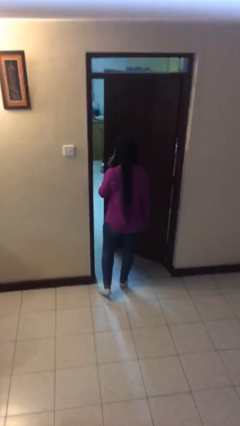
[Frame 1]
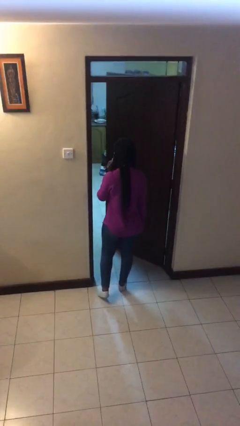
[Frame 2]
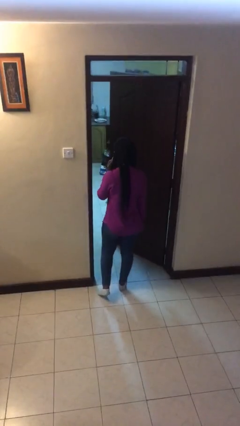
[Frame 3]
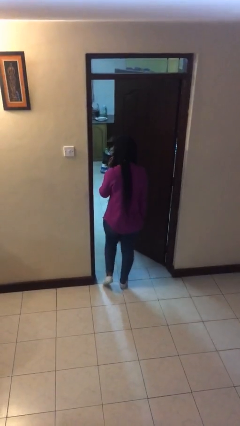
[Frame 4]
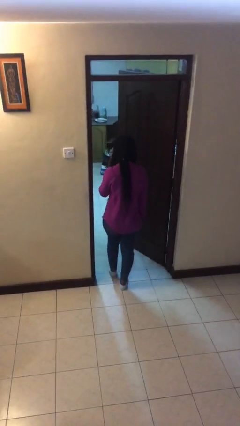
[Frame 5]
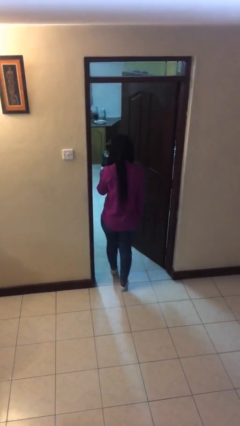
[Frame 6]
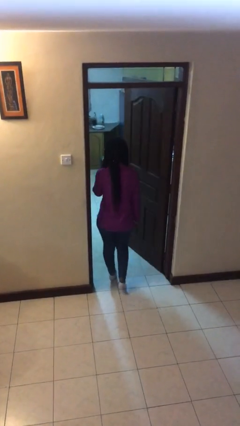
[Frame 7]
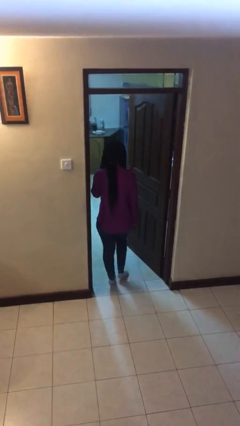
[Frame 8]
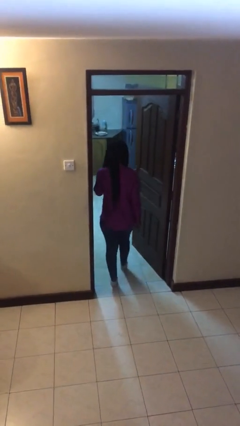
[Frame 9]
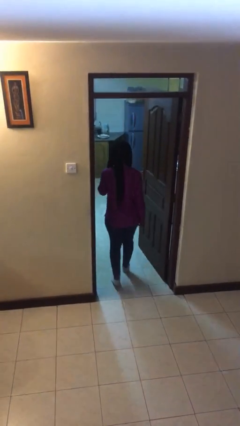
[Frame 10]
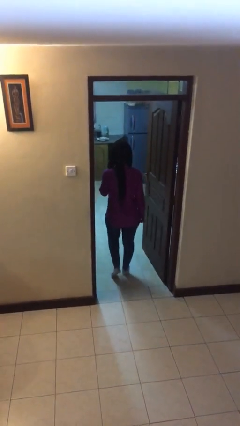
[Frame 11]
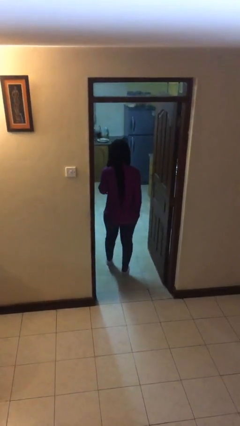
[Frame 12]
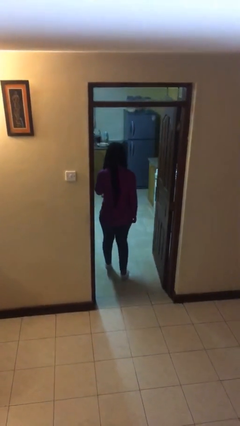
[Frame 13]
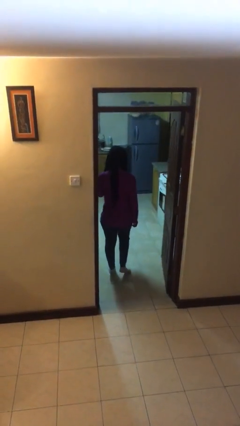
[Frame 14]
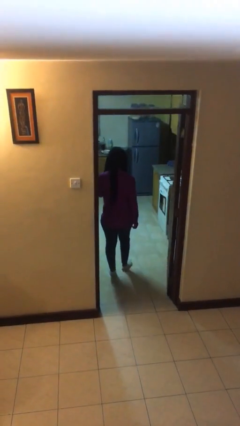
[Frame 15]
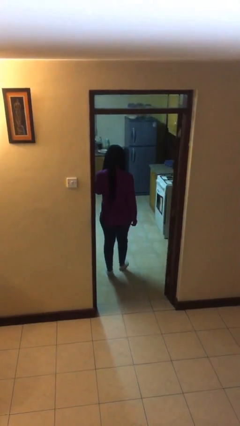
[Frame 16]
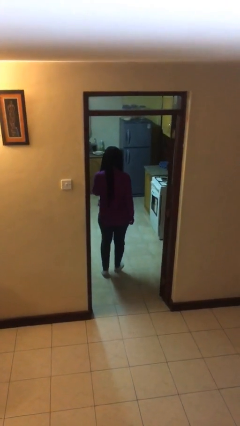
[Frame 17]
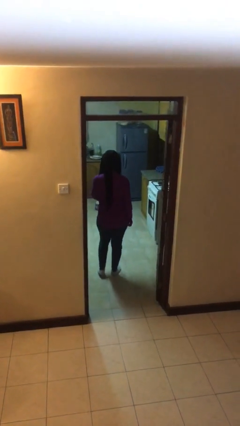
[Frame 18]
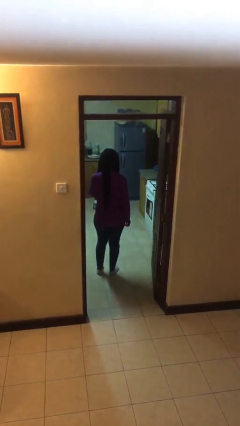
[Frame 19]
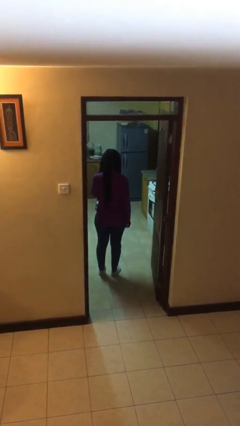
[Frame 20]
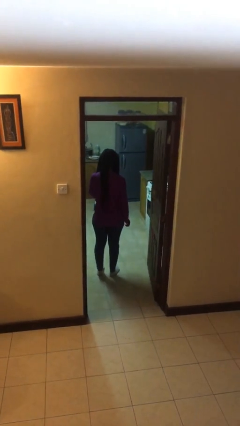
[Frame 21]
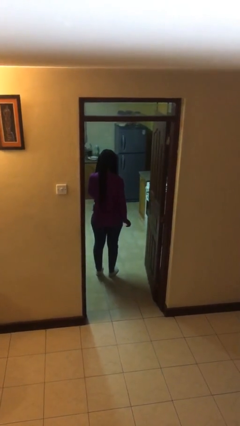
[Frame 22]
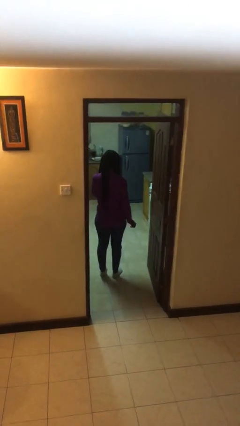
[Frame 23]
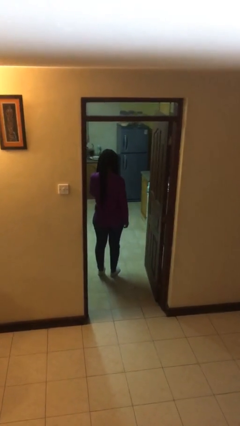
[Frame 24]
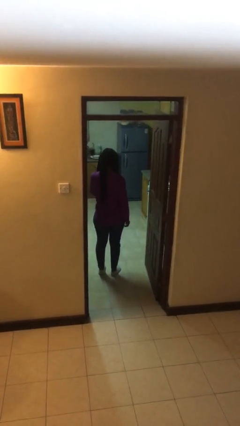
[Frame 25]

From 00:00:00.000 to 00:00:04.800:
person exits scene through structure

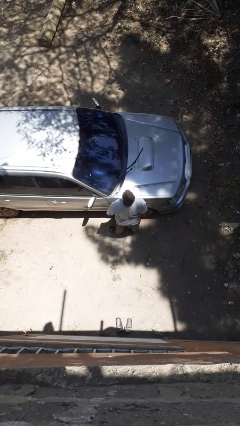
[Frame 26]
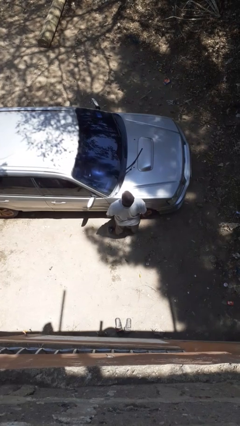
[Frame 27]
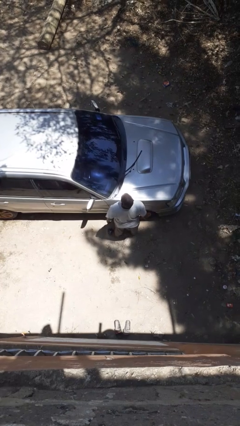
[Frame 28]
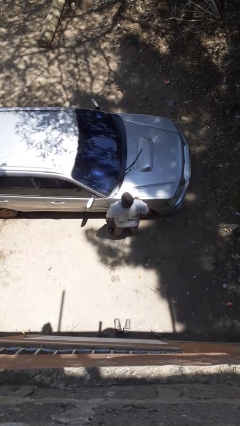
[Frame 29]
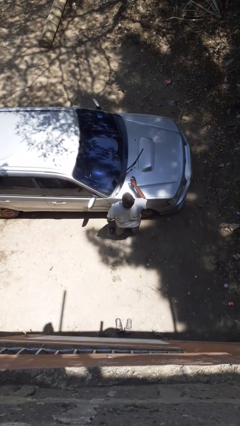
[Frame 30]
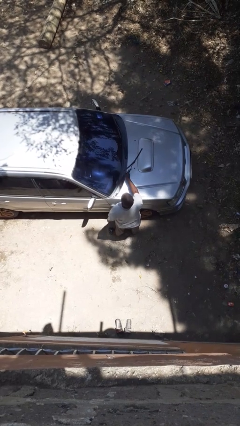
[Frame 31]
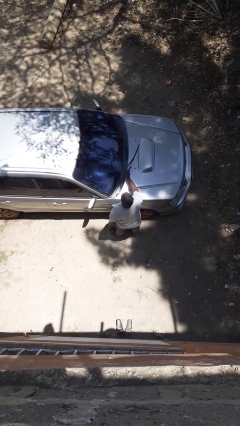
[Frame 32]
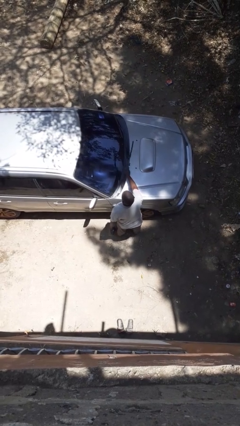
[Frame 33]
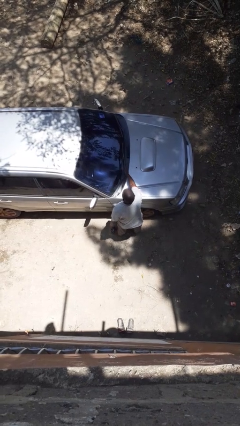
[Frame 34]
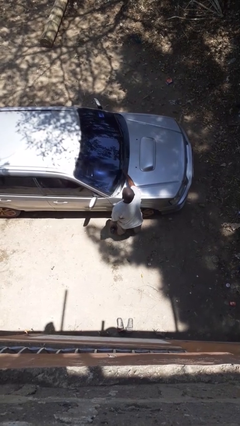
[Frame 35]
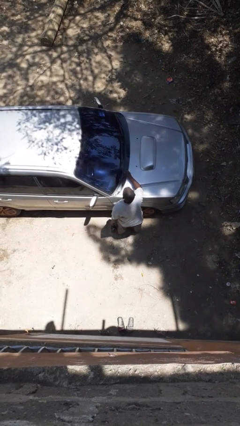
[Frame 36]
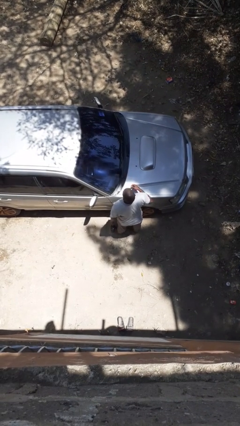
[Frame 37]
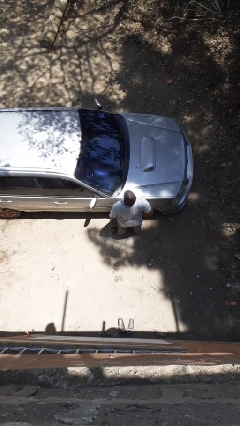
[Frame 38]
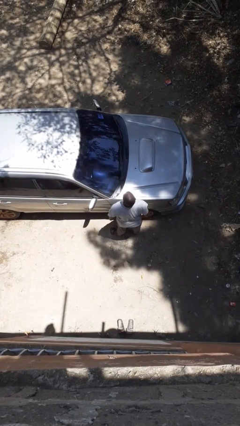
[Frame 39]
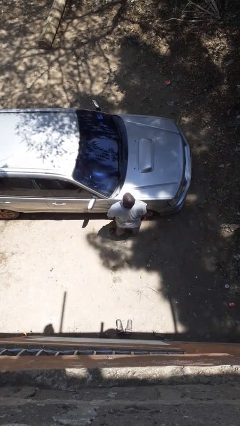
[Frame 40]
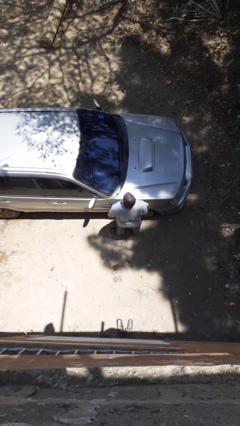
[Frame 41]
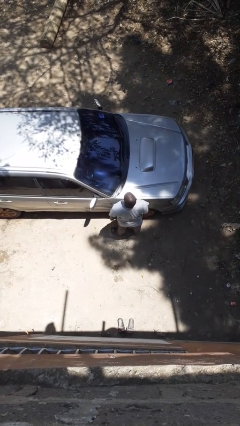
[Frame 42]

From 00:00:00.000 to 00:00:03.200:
person flips down car wipers

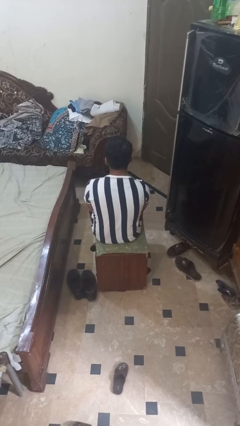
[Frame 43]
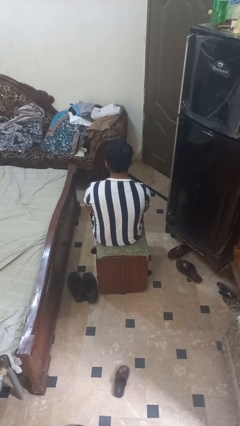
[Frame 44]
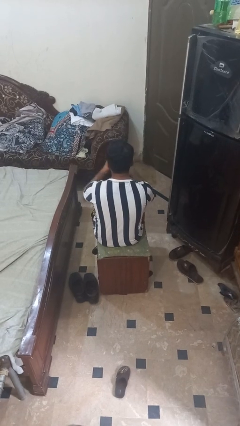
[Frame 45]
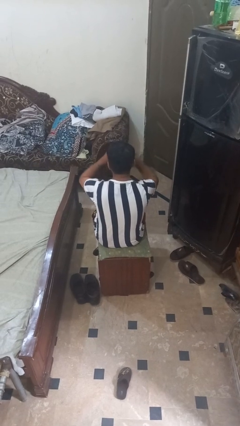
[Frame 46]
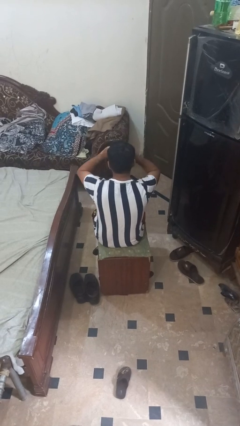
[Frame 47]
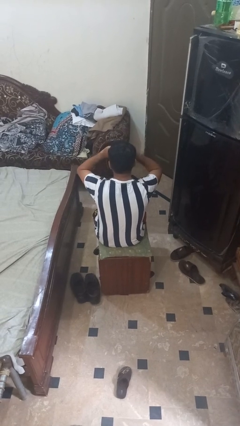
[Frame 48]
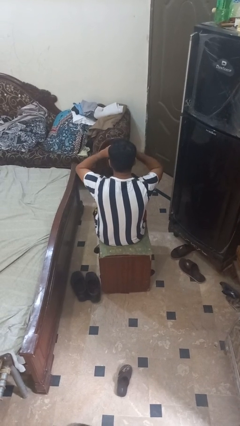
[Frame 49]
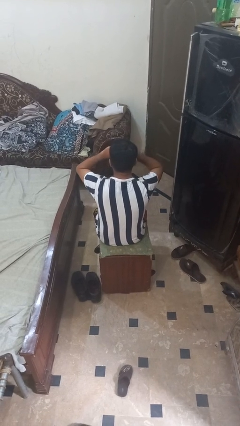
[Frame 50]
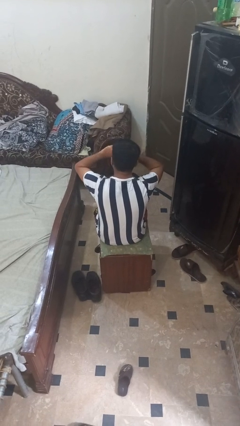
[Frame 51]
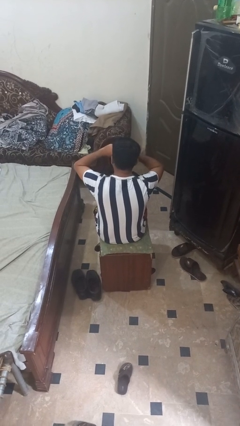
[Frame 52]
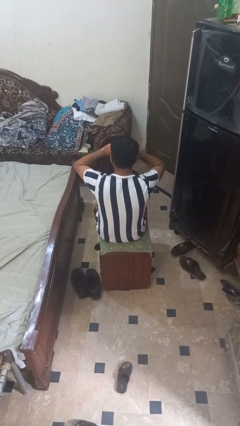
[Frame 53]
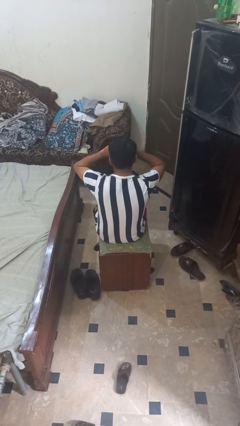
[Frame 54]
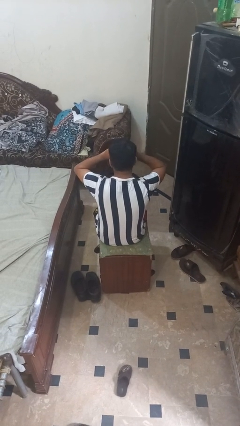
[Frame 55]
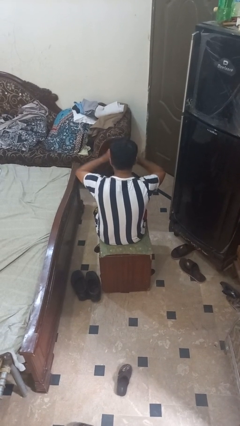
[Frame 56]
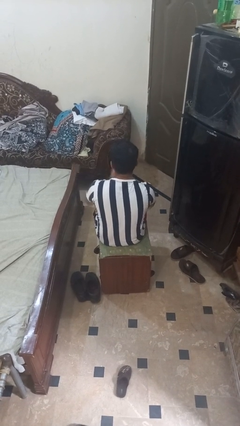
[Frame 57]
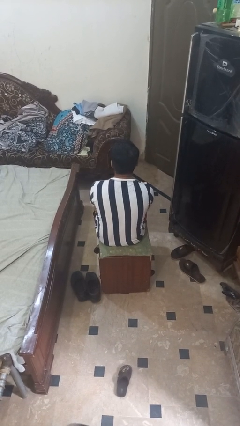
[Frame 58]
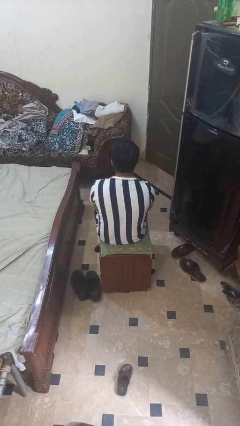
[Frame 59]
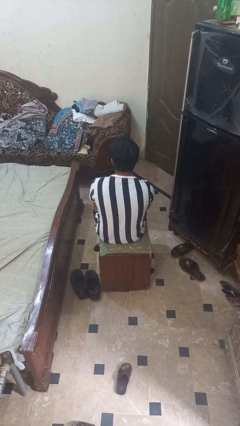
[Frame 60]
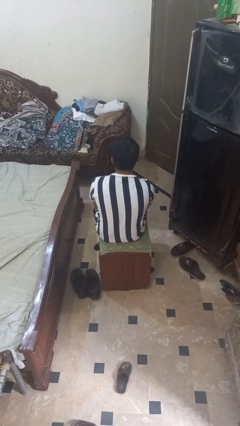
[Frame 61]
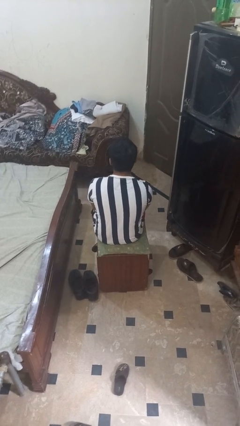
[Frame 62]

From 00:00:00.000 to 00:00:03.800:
person rubs eyes

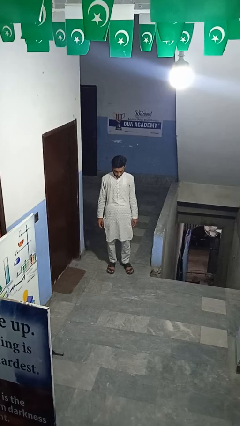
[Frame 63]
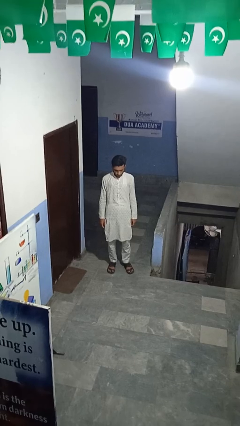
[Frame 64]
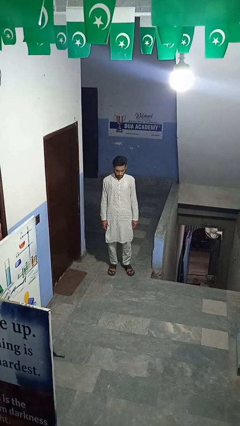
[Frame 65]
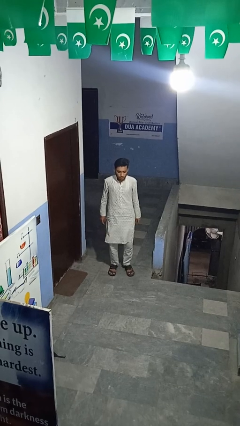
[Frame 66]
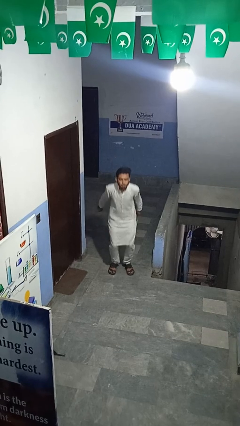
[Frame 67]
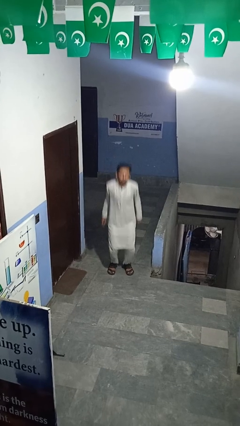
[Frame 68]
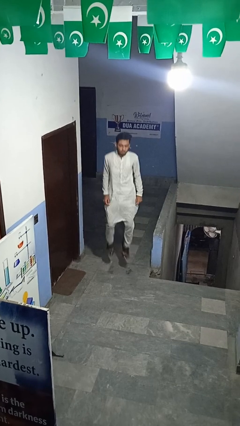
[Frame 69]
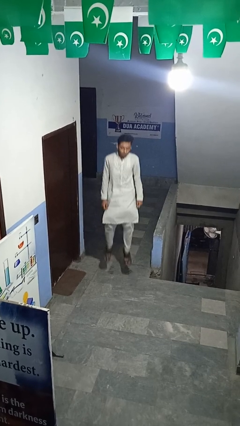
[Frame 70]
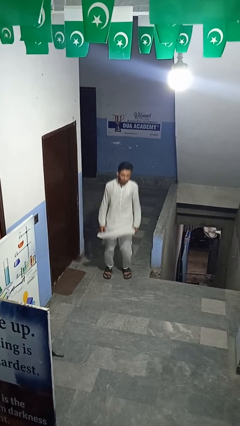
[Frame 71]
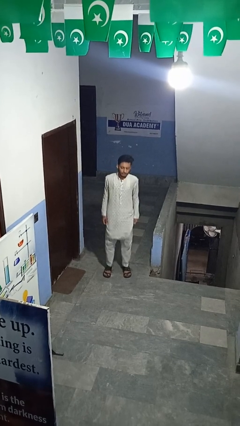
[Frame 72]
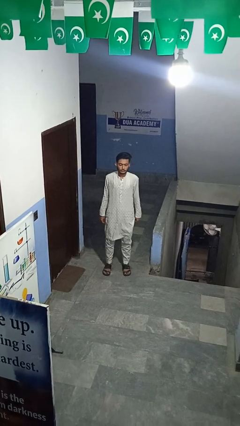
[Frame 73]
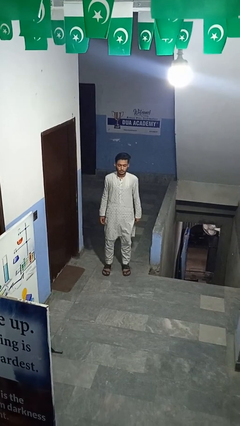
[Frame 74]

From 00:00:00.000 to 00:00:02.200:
person jumps

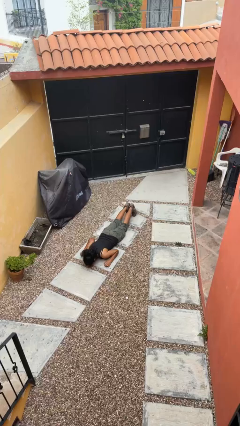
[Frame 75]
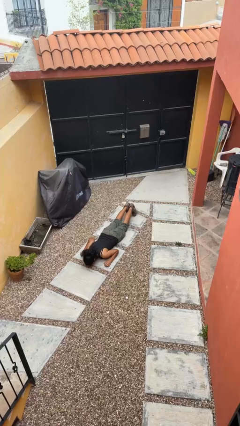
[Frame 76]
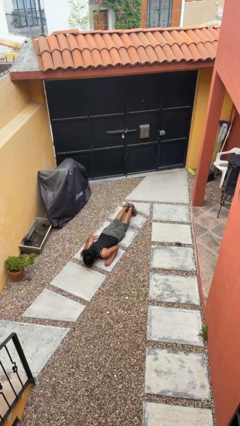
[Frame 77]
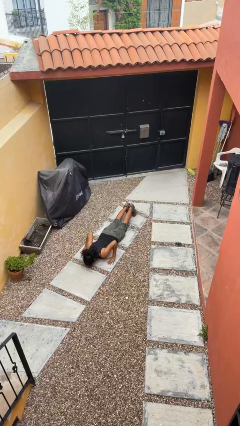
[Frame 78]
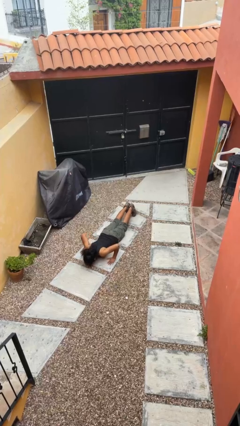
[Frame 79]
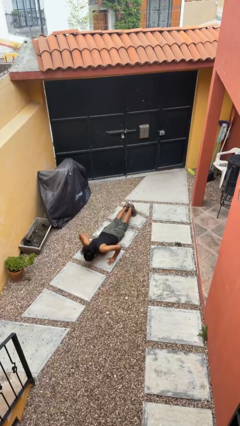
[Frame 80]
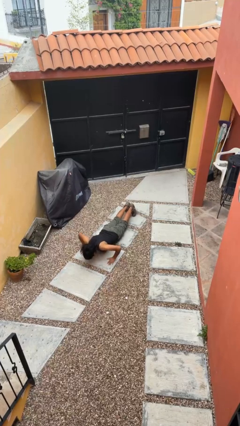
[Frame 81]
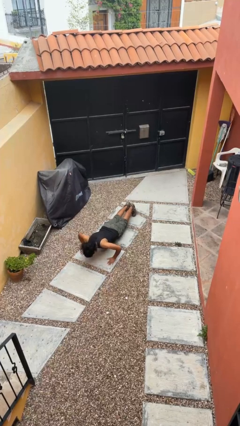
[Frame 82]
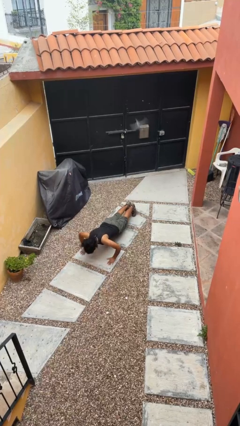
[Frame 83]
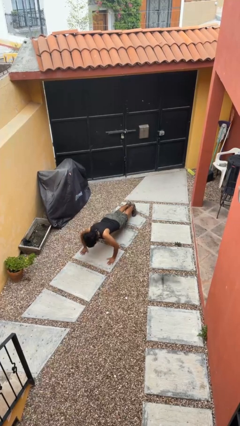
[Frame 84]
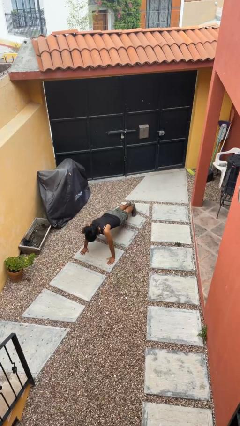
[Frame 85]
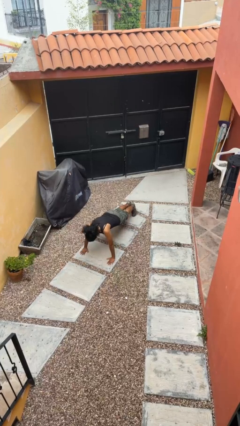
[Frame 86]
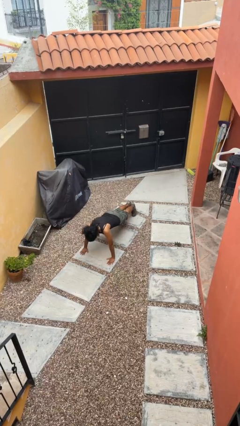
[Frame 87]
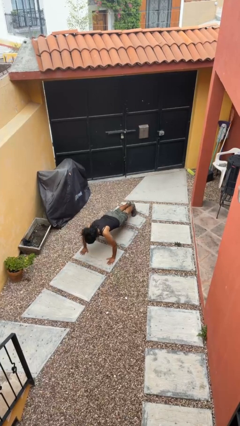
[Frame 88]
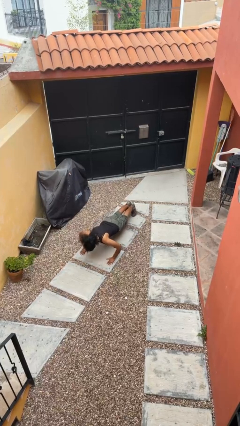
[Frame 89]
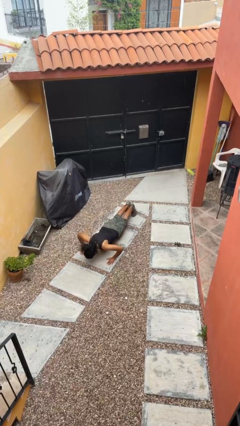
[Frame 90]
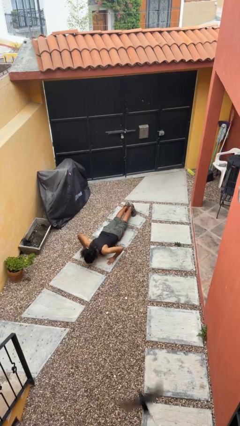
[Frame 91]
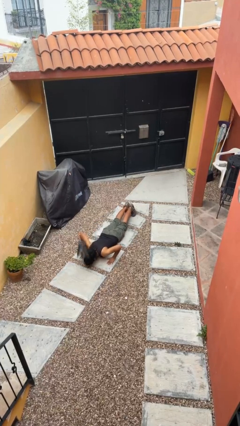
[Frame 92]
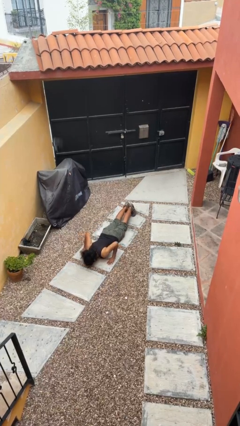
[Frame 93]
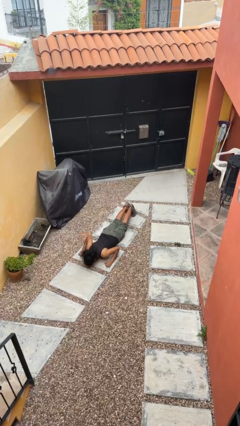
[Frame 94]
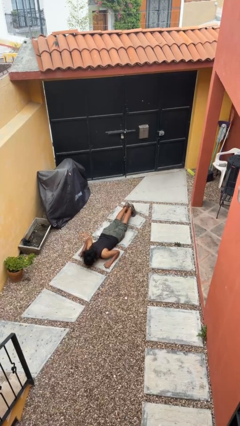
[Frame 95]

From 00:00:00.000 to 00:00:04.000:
person exercises with pushup
